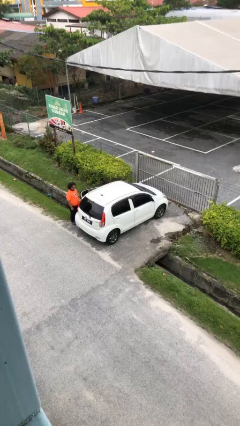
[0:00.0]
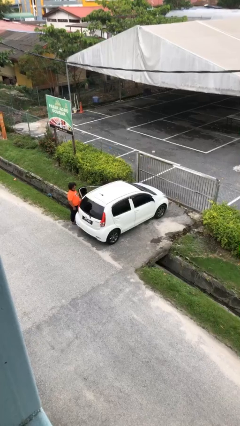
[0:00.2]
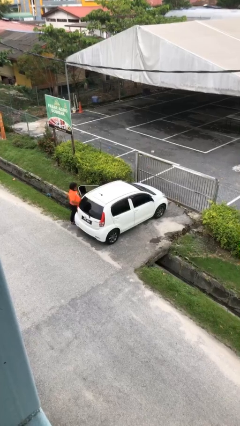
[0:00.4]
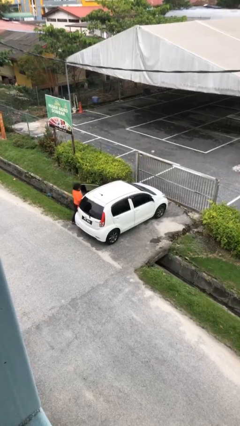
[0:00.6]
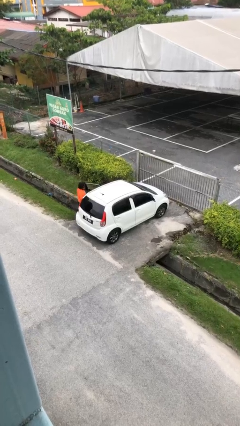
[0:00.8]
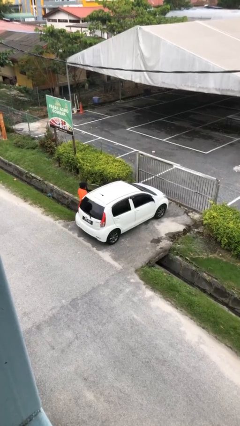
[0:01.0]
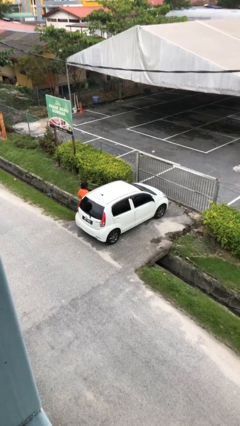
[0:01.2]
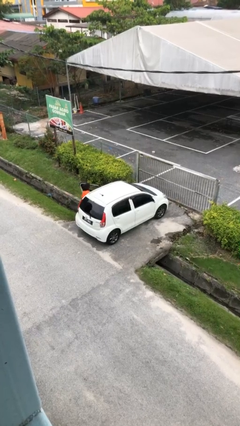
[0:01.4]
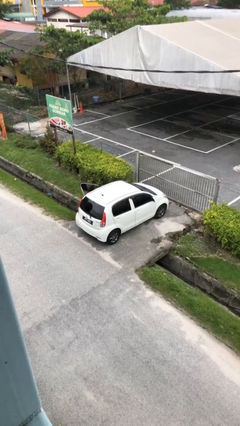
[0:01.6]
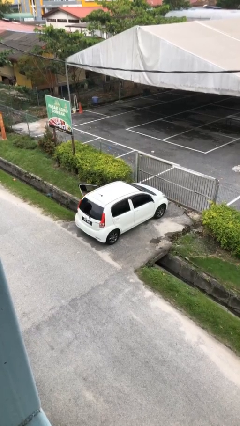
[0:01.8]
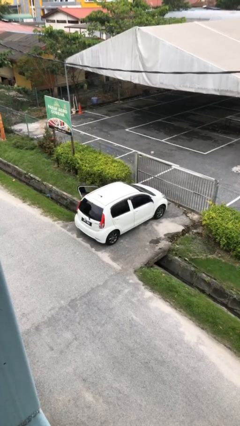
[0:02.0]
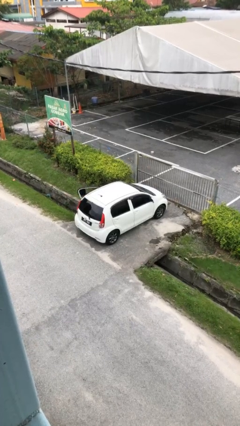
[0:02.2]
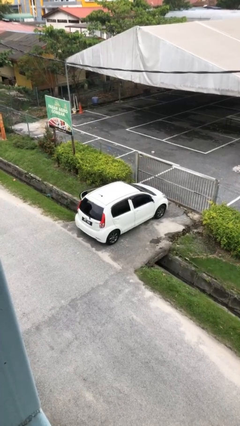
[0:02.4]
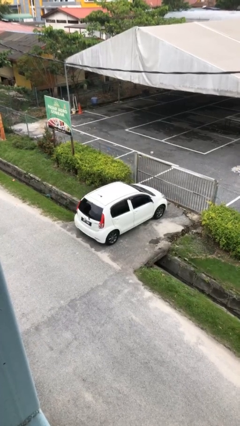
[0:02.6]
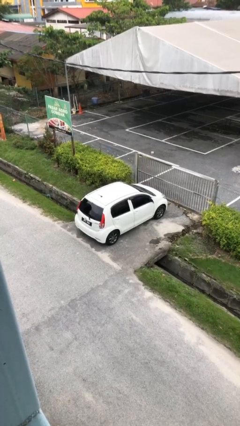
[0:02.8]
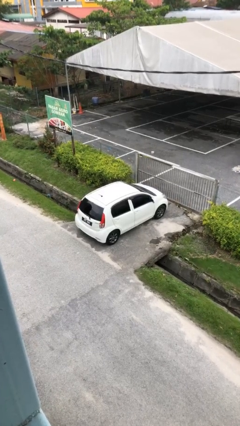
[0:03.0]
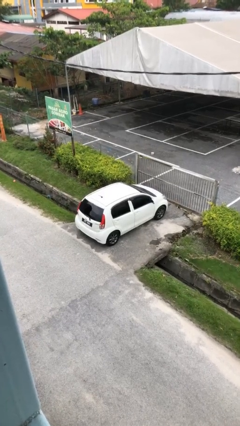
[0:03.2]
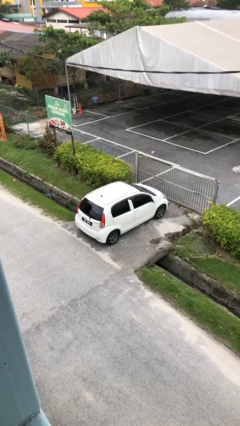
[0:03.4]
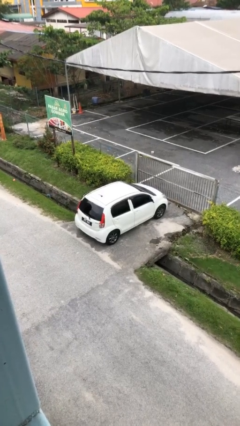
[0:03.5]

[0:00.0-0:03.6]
car picks up person

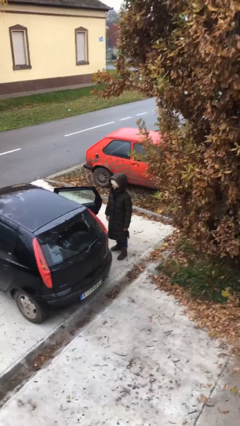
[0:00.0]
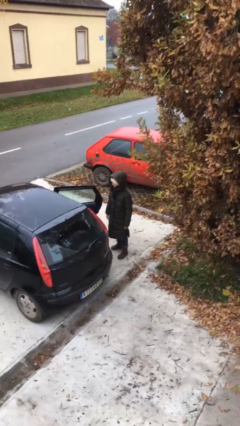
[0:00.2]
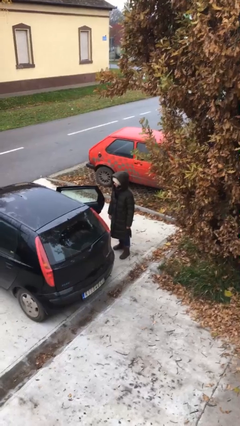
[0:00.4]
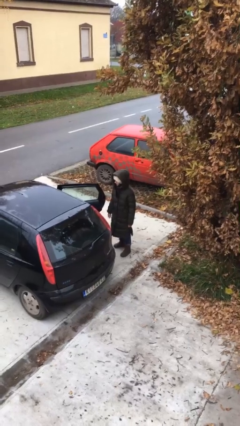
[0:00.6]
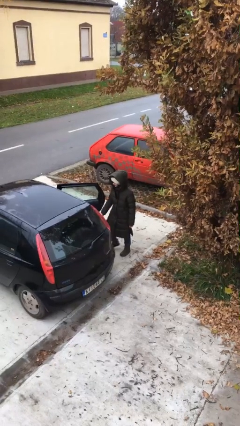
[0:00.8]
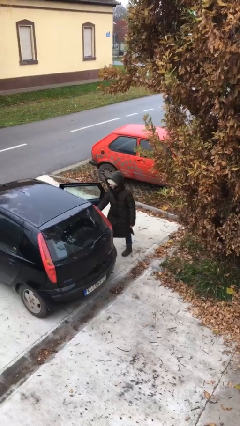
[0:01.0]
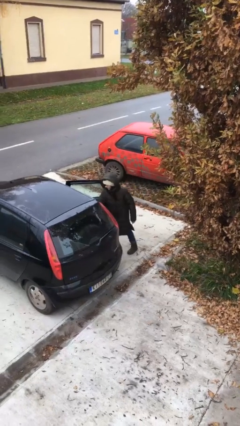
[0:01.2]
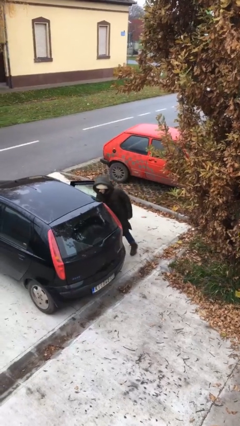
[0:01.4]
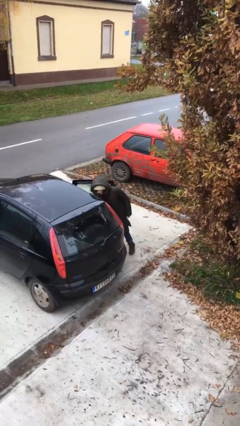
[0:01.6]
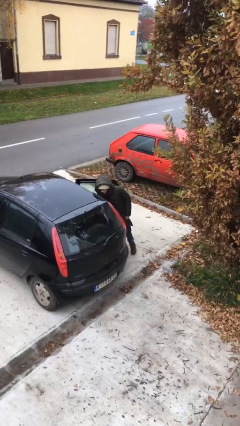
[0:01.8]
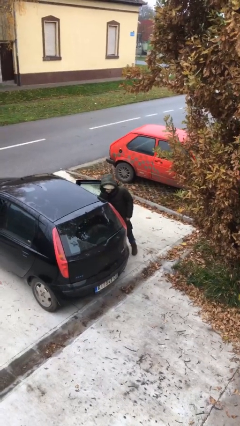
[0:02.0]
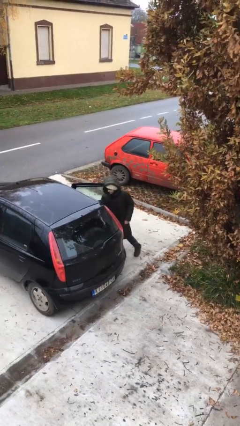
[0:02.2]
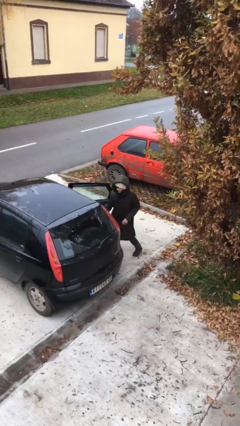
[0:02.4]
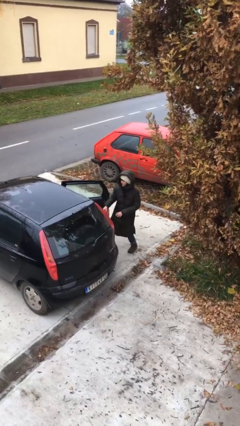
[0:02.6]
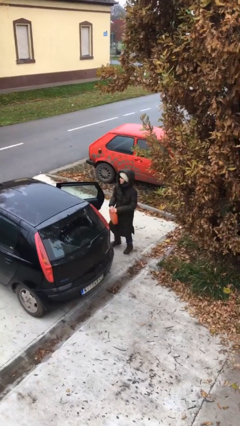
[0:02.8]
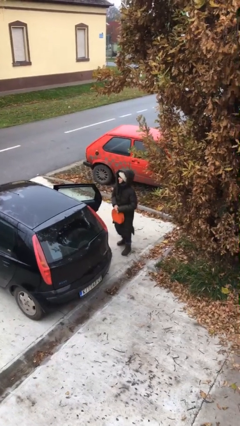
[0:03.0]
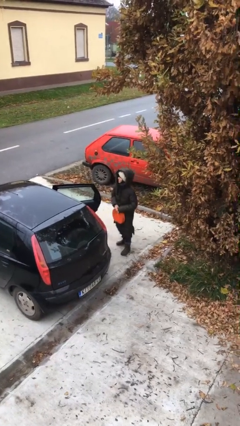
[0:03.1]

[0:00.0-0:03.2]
person unloads car

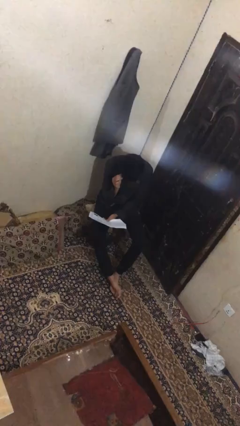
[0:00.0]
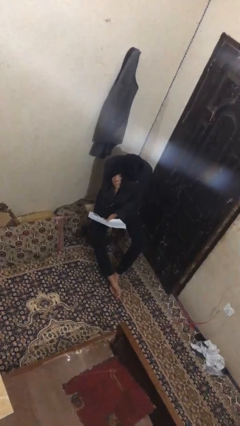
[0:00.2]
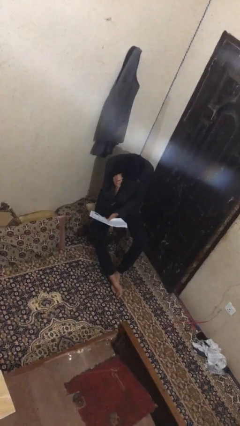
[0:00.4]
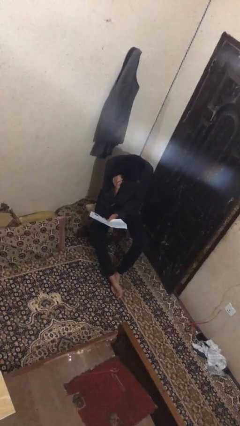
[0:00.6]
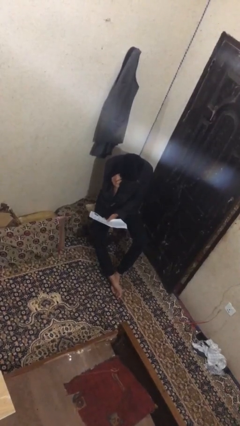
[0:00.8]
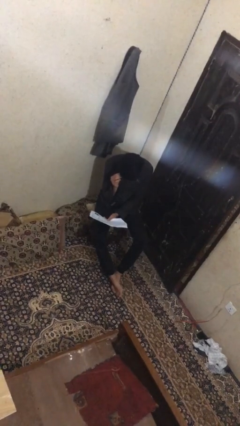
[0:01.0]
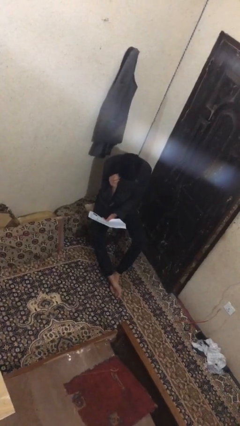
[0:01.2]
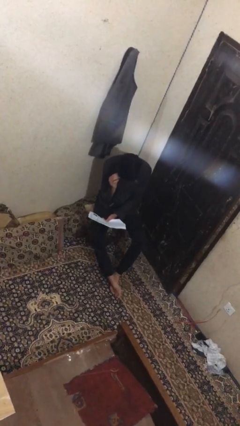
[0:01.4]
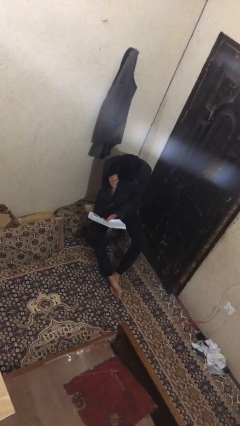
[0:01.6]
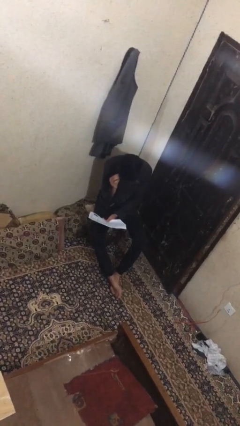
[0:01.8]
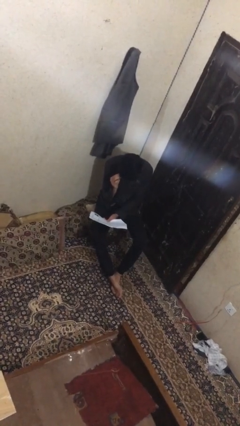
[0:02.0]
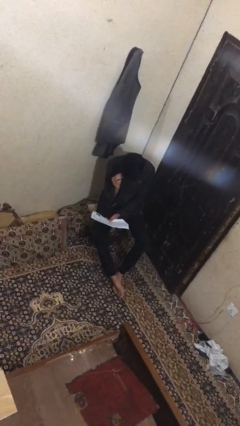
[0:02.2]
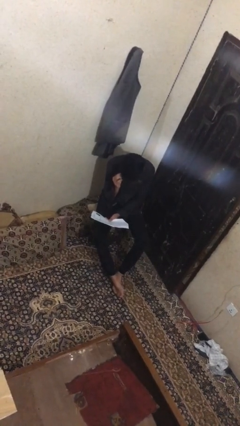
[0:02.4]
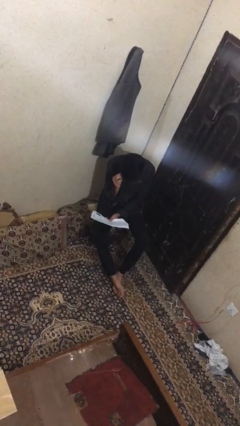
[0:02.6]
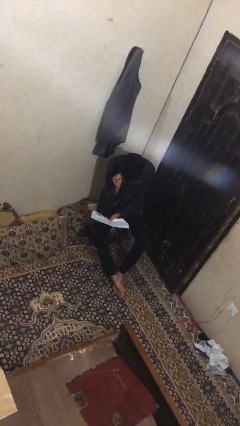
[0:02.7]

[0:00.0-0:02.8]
person reads document

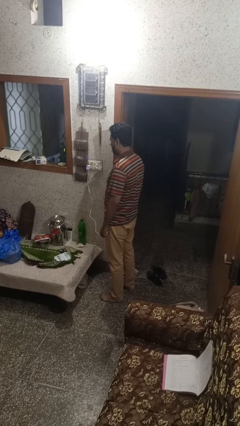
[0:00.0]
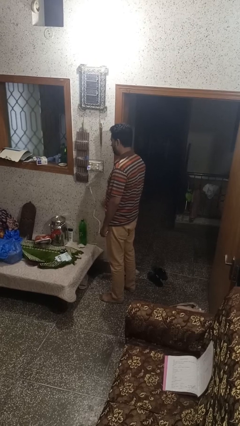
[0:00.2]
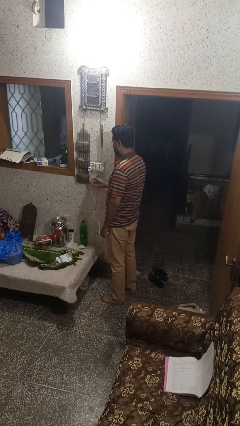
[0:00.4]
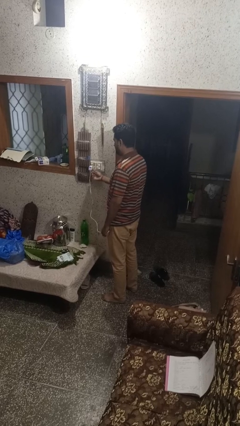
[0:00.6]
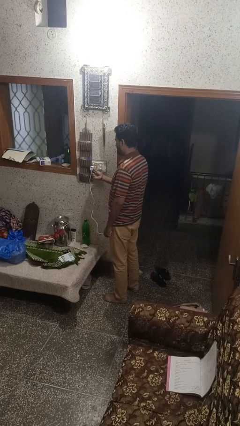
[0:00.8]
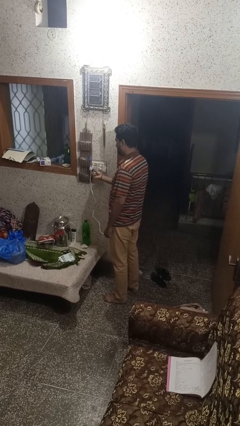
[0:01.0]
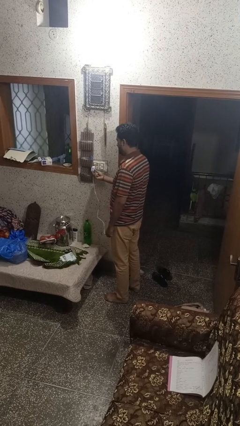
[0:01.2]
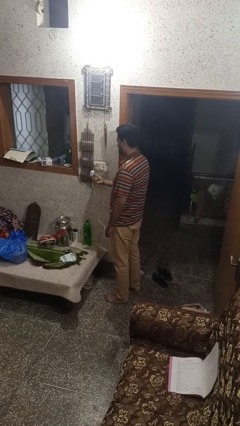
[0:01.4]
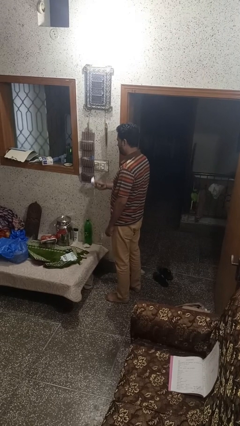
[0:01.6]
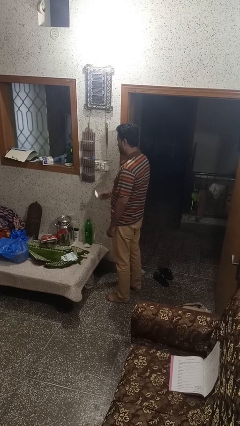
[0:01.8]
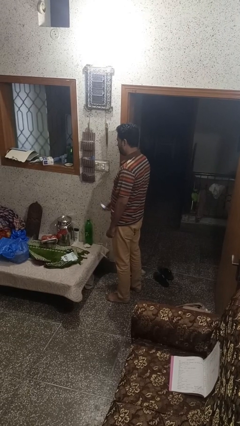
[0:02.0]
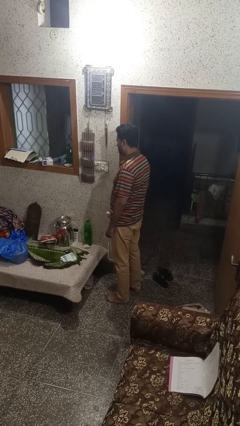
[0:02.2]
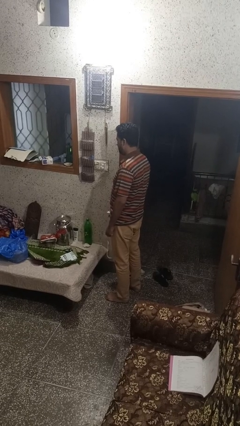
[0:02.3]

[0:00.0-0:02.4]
person unplugs from electrical socket

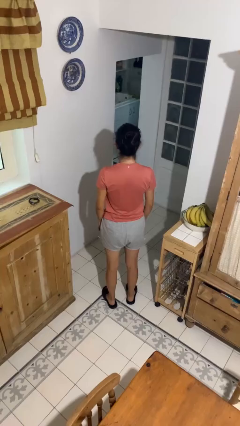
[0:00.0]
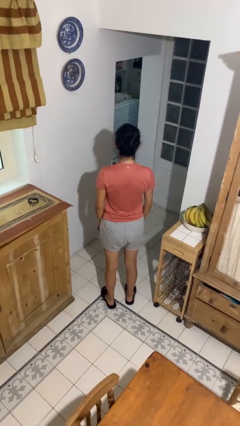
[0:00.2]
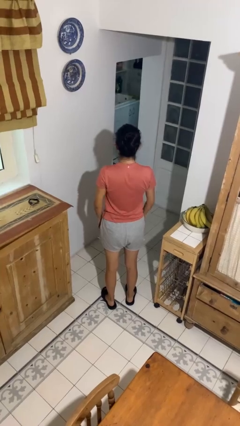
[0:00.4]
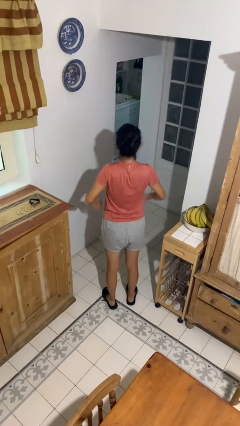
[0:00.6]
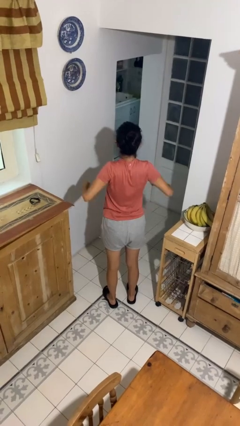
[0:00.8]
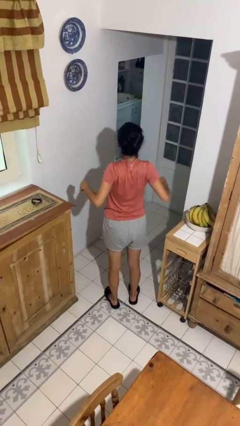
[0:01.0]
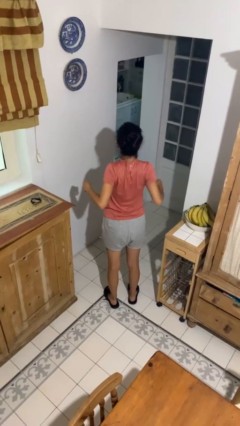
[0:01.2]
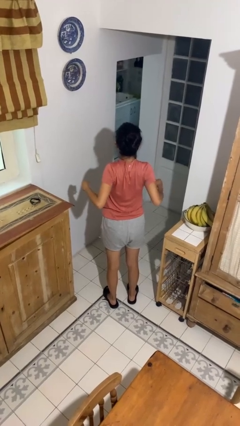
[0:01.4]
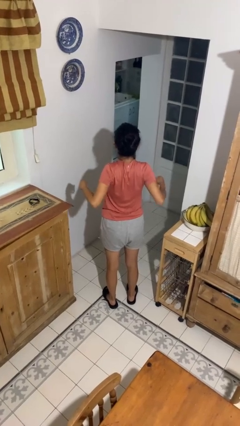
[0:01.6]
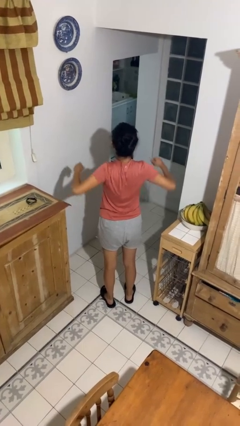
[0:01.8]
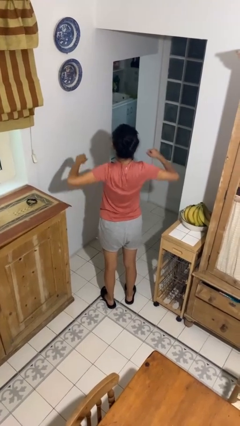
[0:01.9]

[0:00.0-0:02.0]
person stretches back

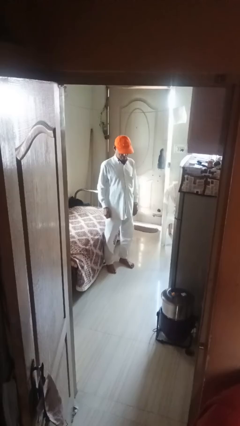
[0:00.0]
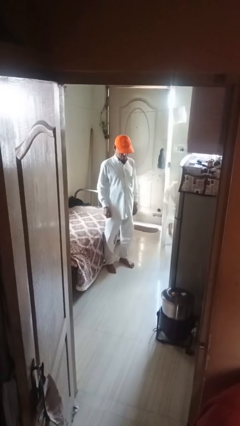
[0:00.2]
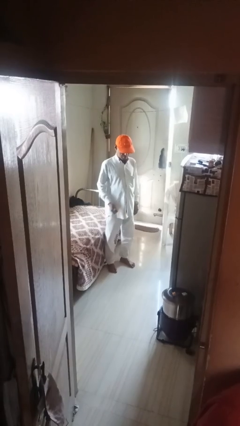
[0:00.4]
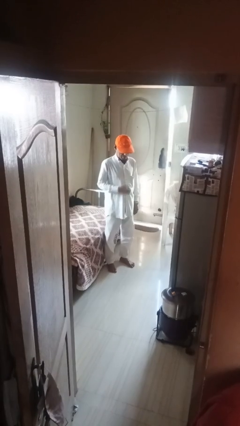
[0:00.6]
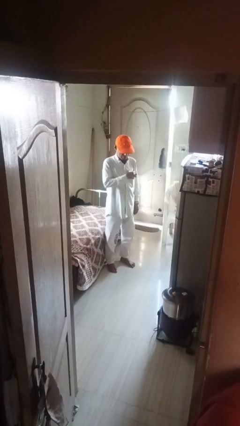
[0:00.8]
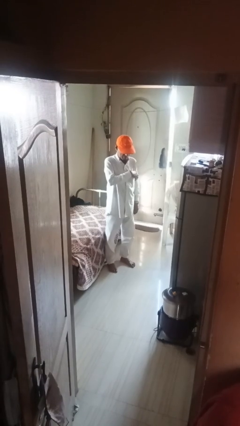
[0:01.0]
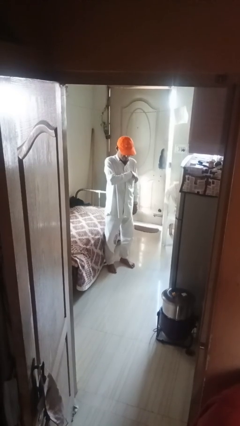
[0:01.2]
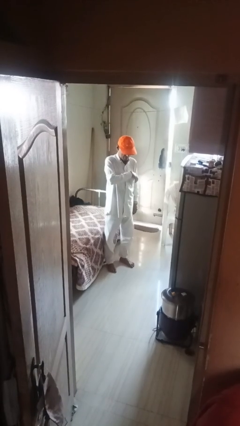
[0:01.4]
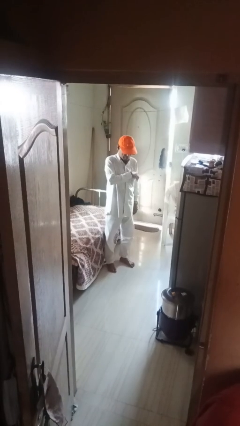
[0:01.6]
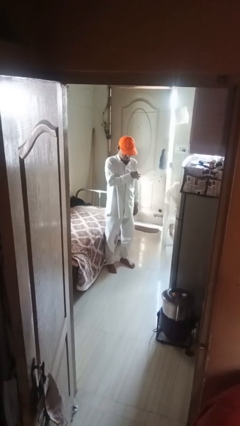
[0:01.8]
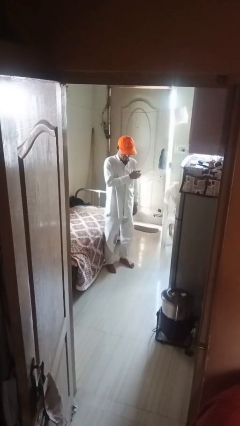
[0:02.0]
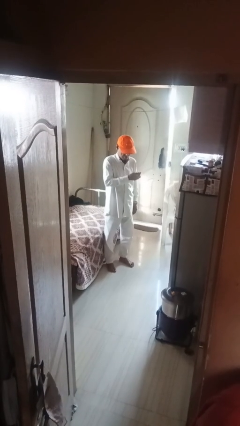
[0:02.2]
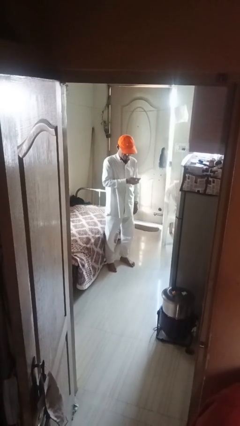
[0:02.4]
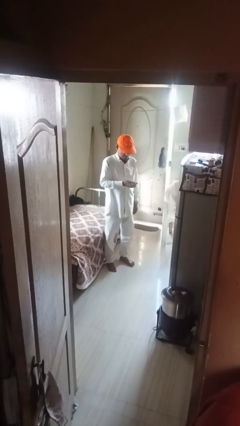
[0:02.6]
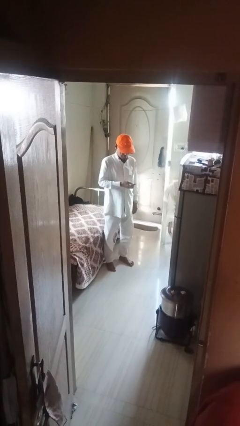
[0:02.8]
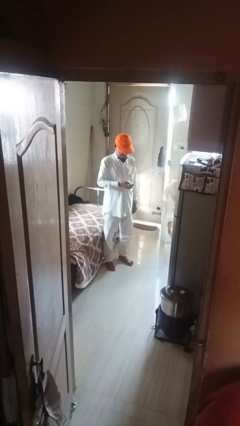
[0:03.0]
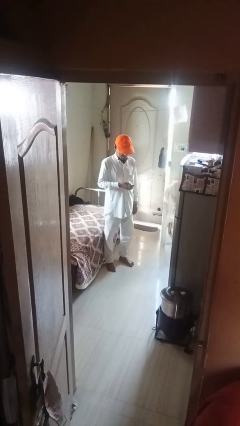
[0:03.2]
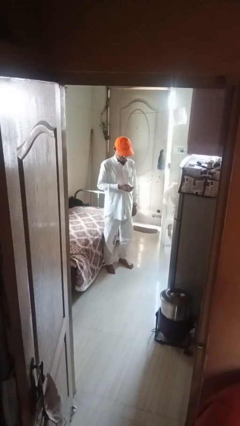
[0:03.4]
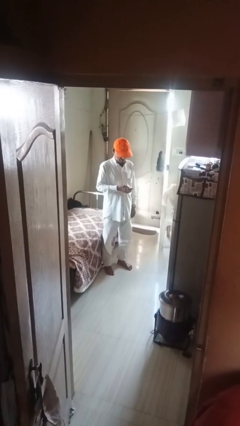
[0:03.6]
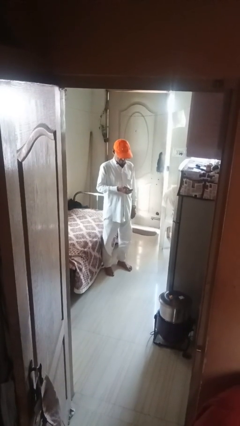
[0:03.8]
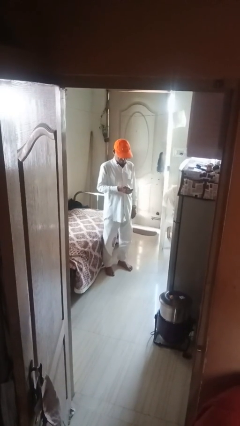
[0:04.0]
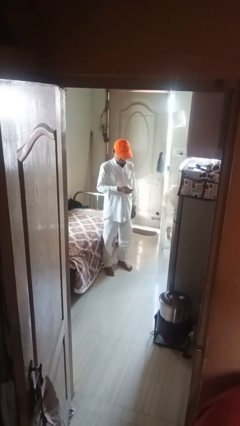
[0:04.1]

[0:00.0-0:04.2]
person takes phone from pocket
